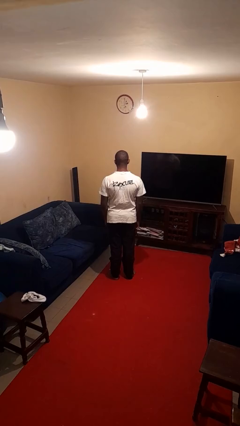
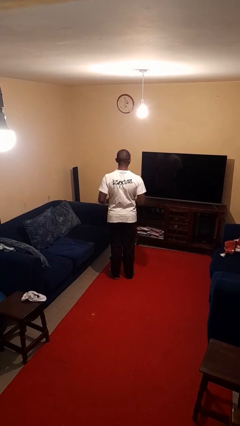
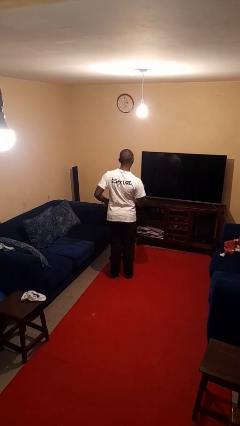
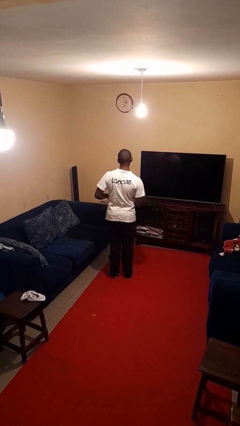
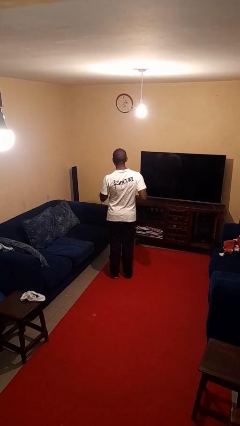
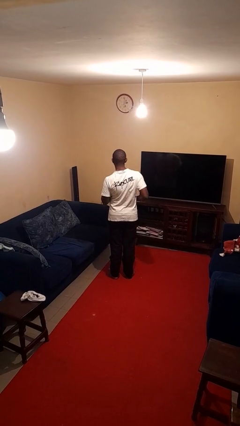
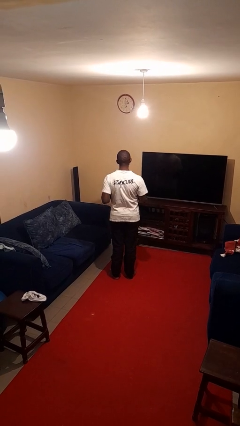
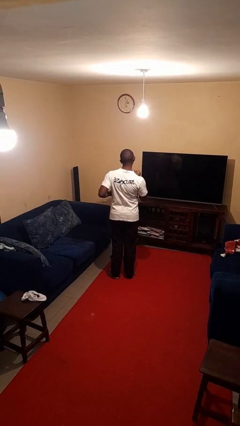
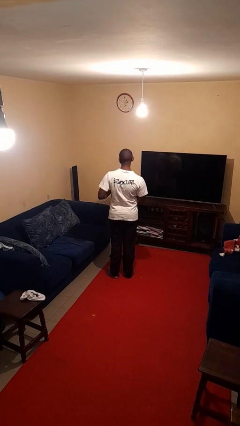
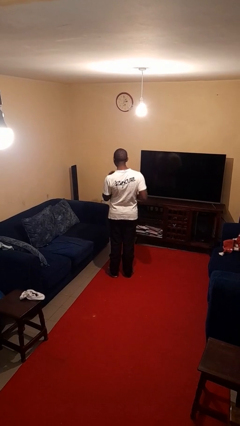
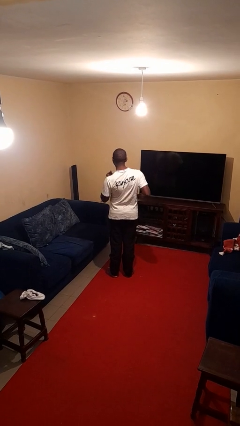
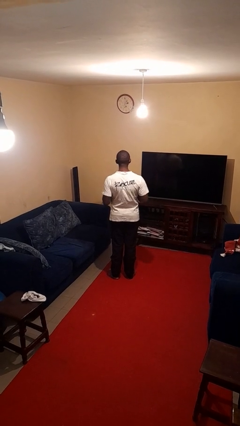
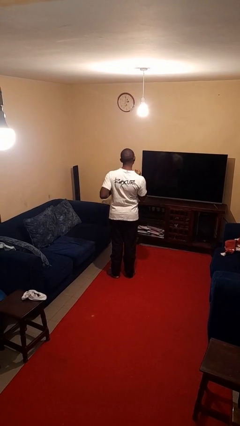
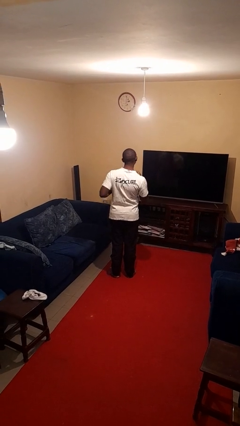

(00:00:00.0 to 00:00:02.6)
person dances in place

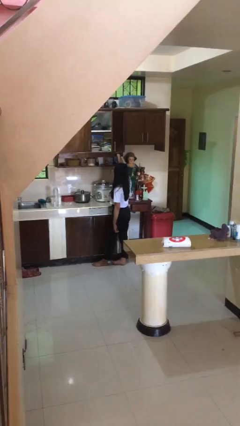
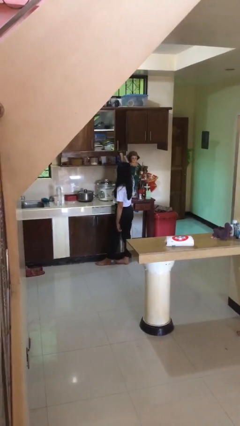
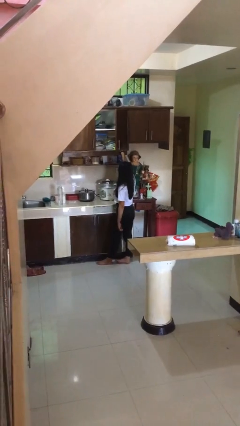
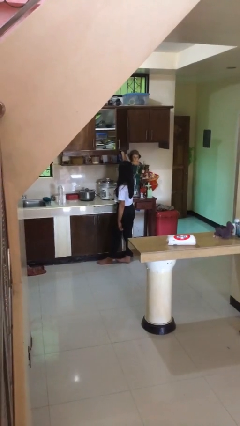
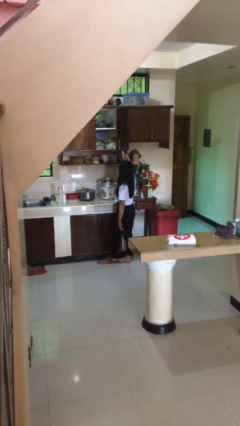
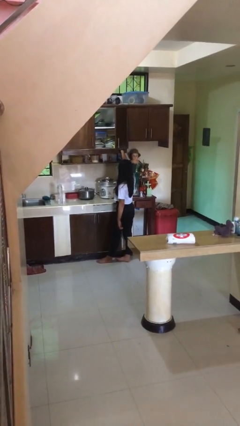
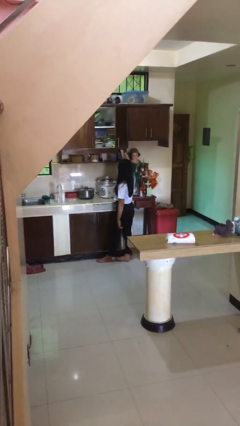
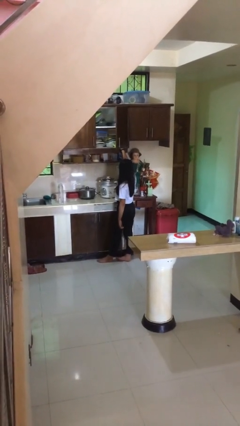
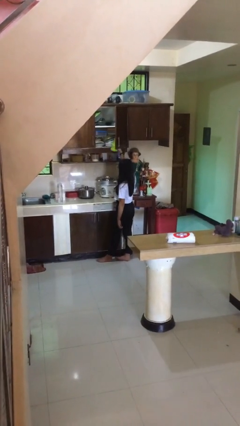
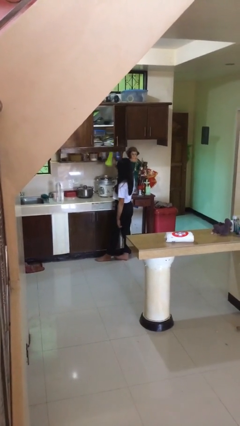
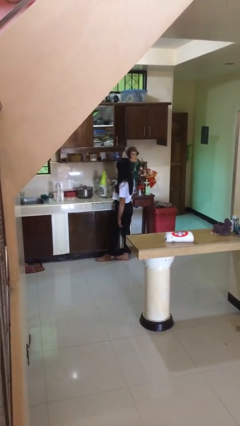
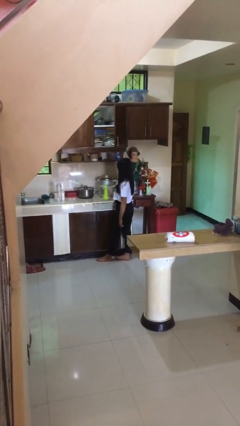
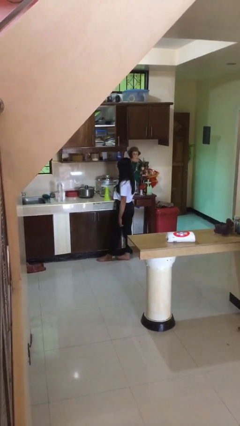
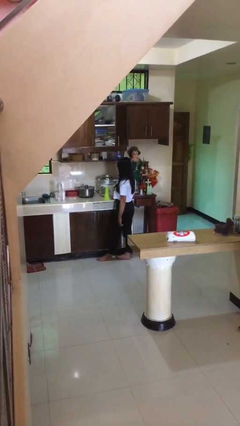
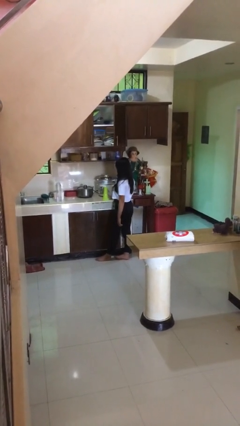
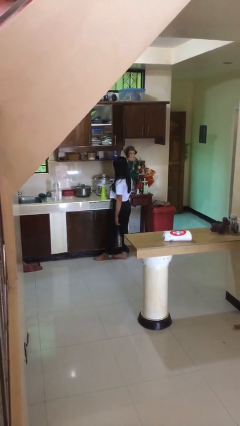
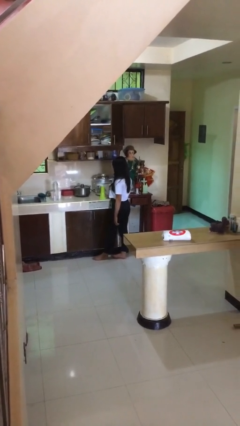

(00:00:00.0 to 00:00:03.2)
person picks up object from cabinet

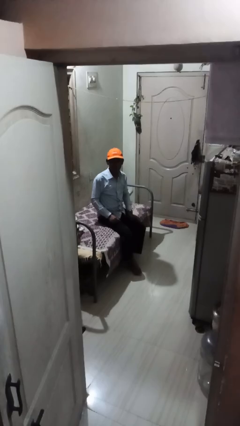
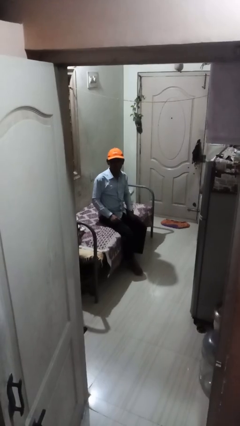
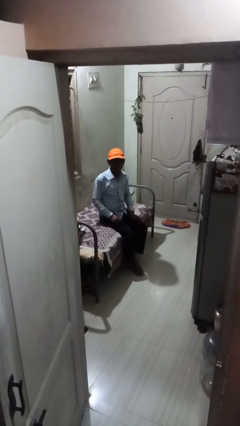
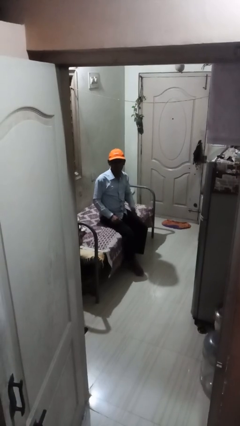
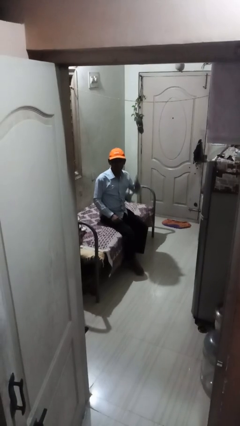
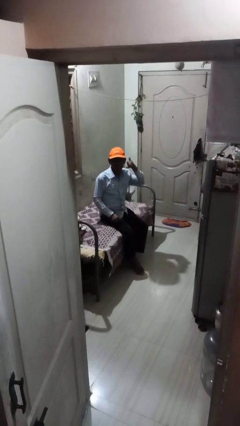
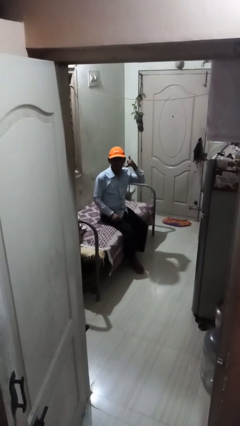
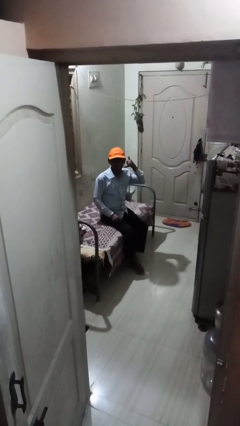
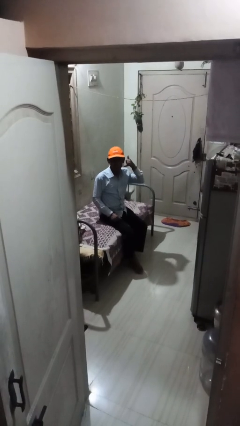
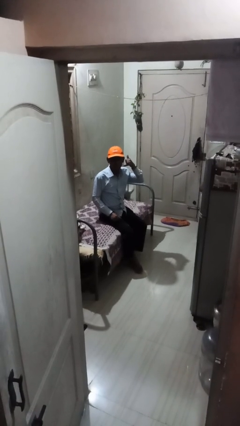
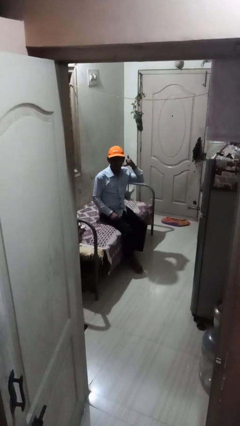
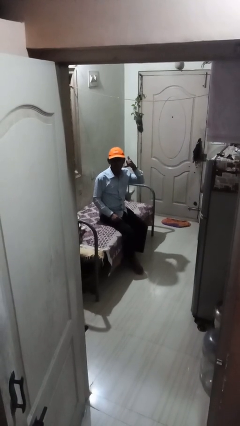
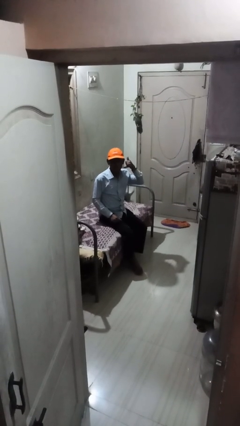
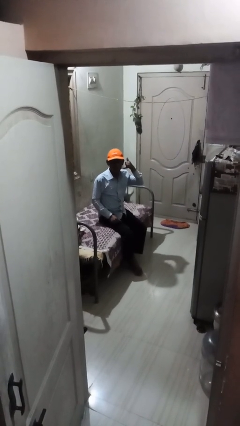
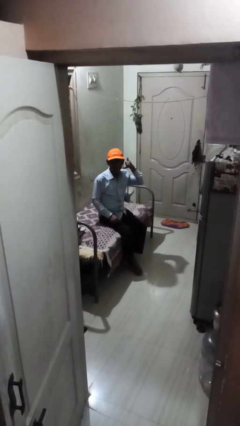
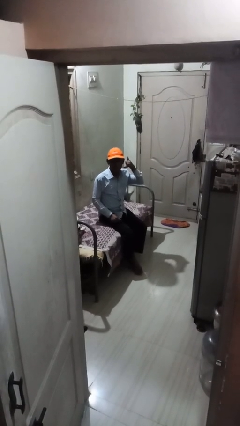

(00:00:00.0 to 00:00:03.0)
person gestures call me

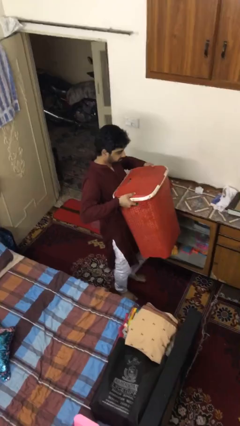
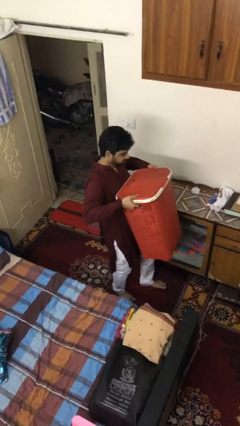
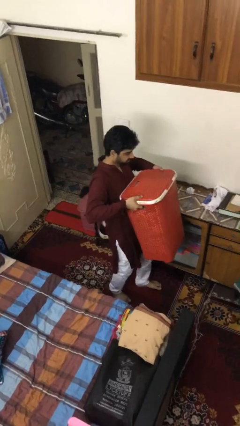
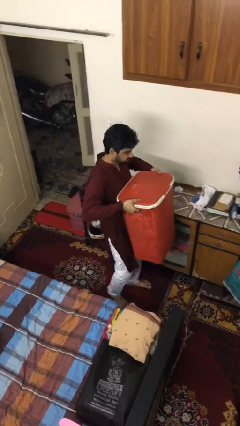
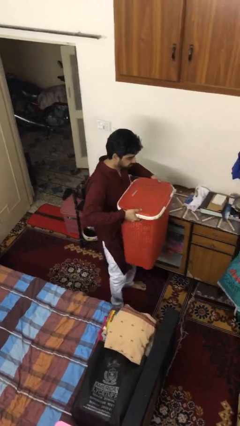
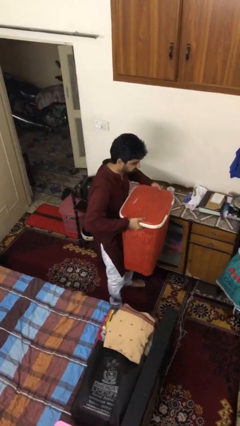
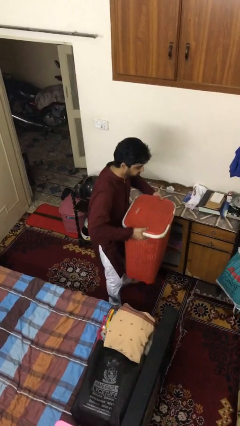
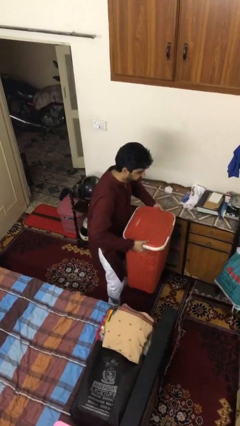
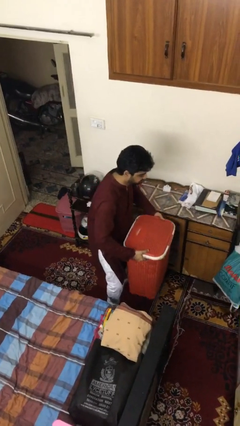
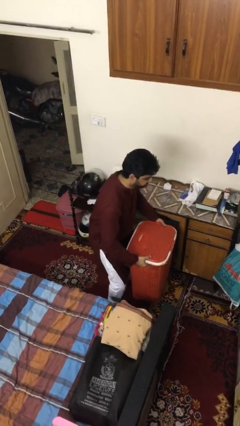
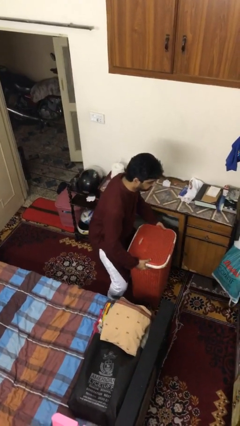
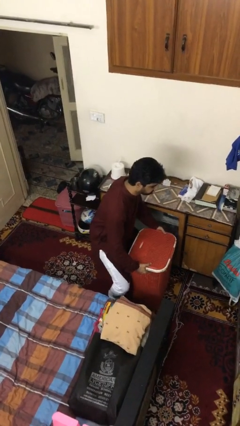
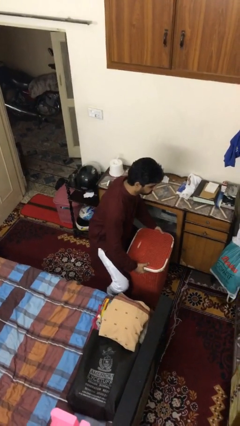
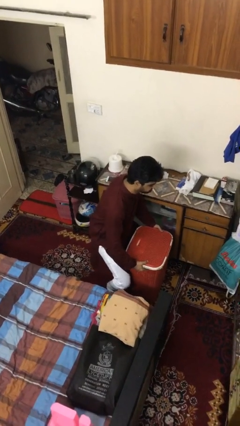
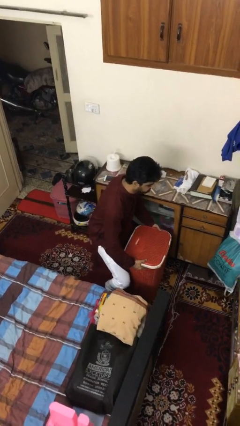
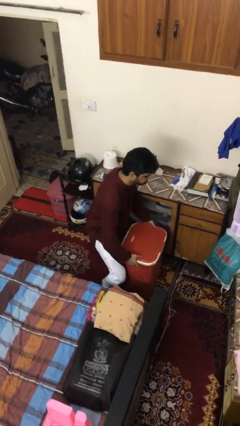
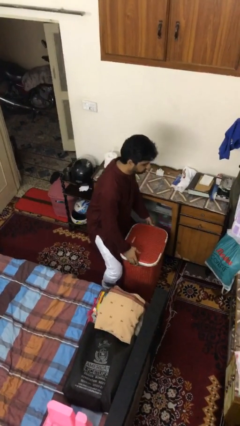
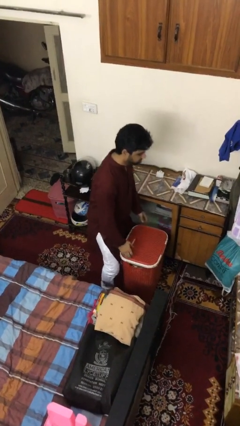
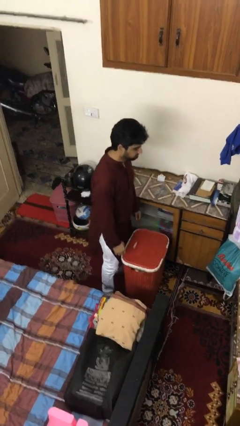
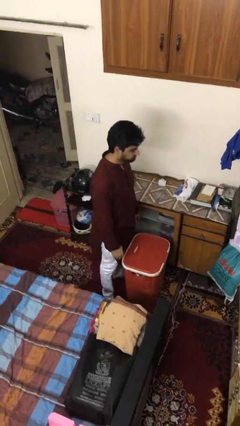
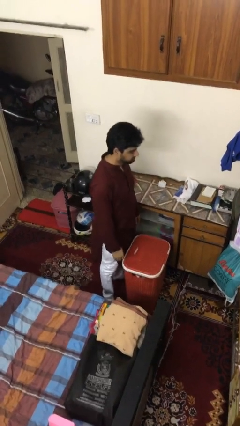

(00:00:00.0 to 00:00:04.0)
person puts down object on floor

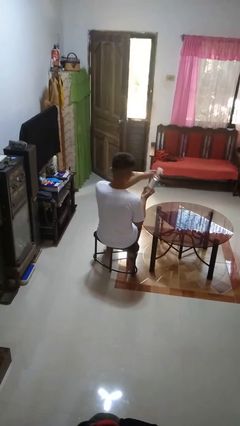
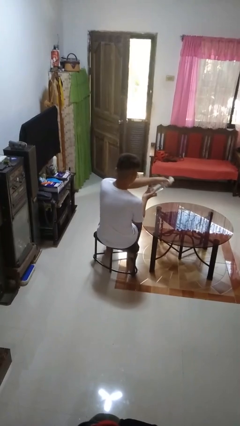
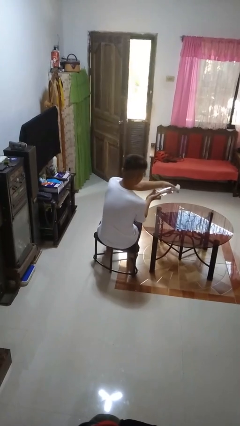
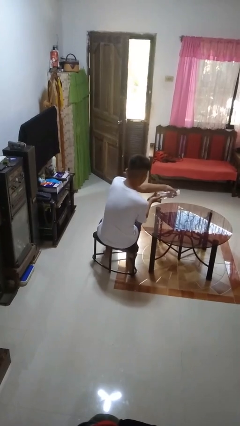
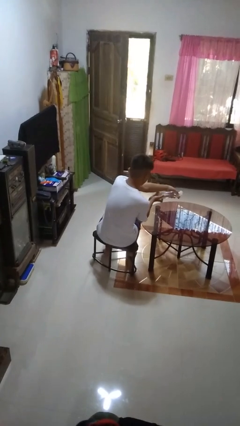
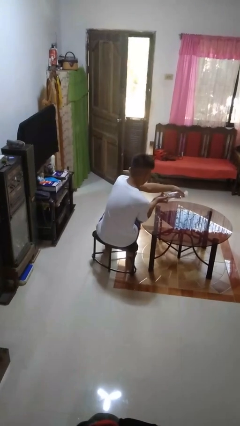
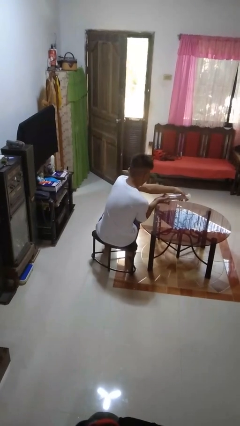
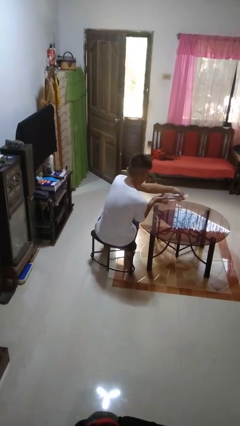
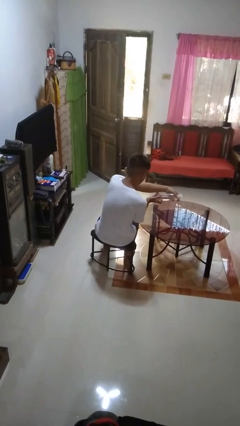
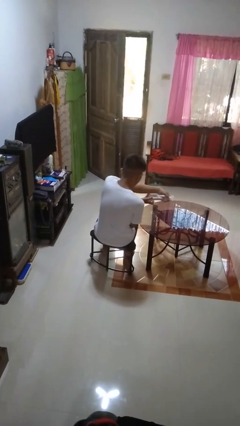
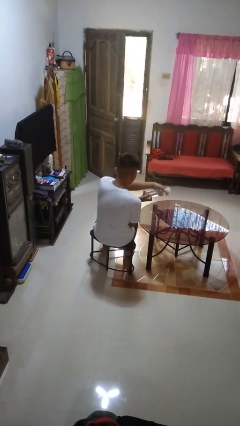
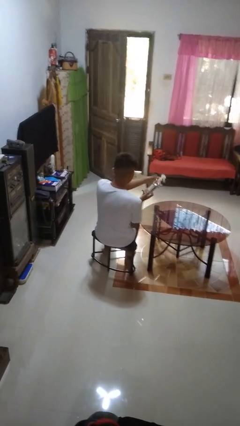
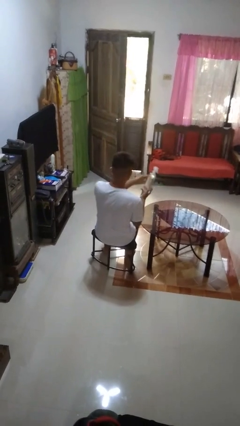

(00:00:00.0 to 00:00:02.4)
person sprays from bottle

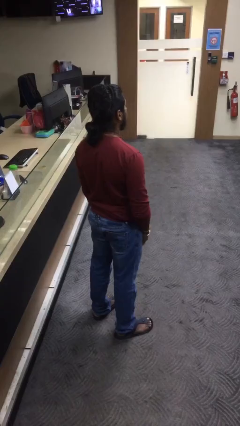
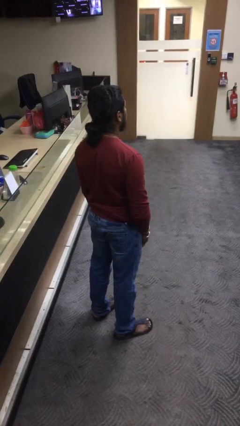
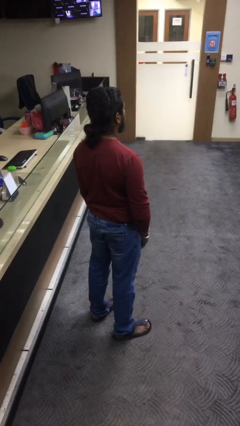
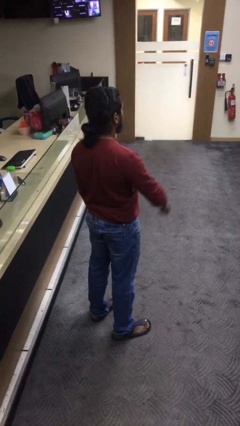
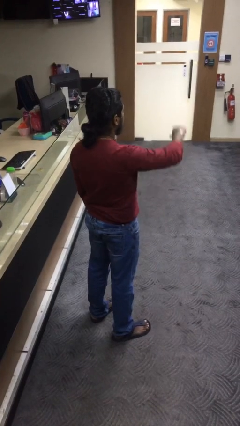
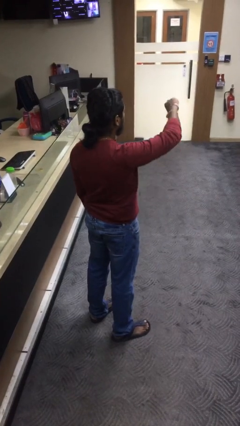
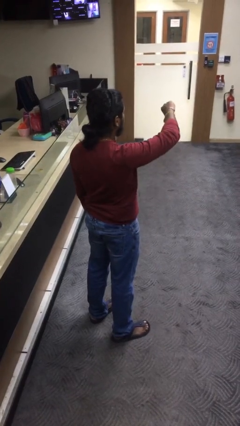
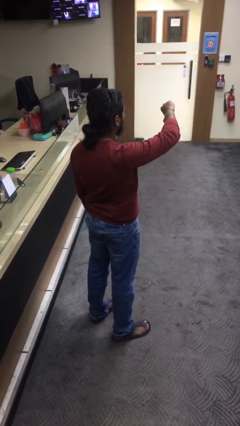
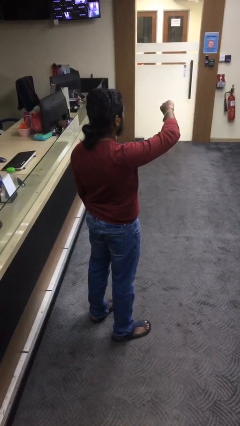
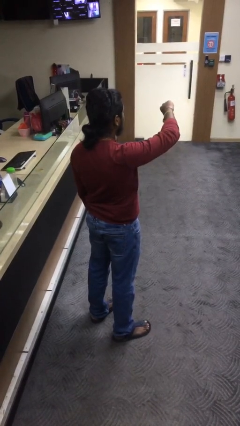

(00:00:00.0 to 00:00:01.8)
person gestures thumbs down

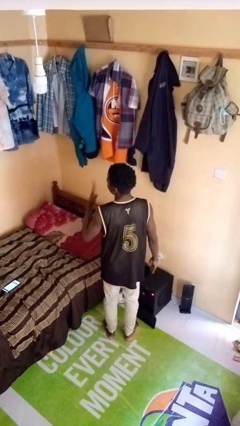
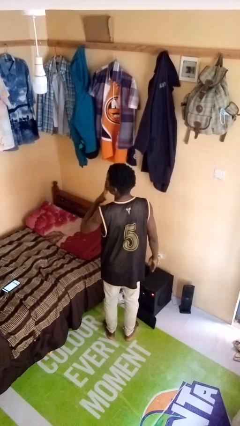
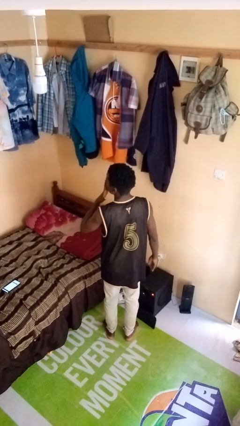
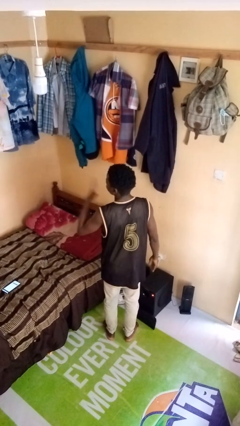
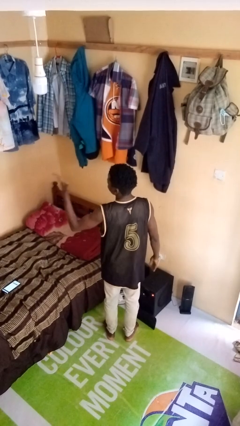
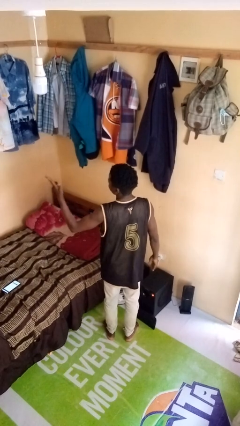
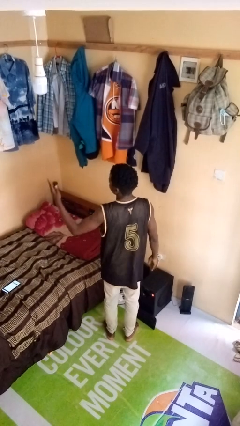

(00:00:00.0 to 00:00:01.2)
person gestures blow kiss
